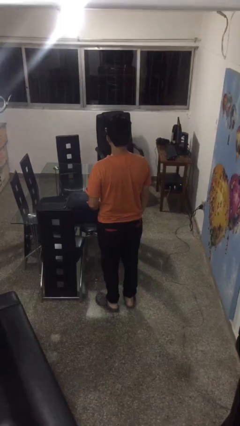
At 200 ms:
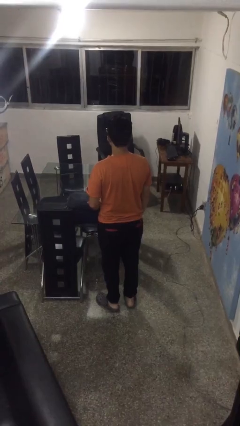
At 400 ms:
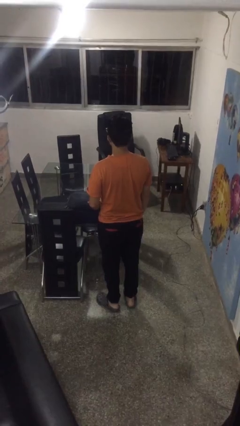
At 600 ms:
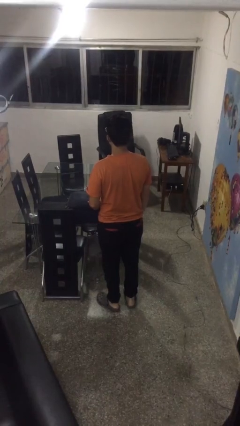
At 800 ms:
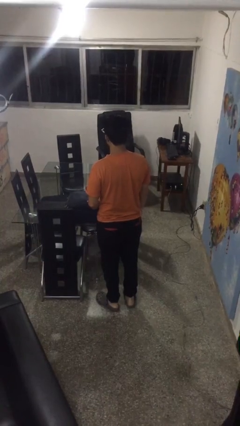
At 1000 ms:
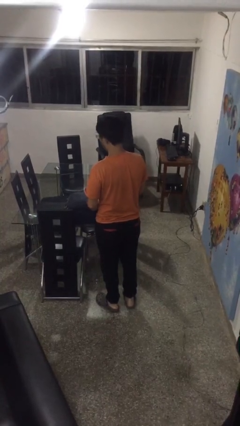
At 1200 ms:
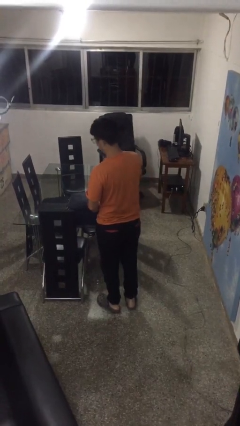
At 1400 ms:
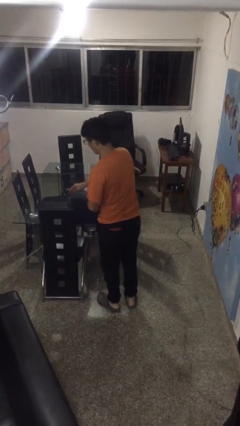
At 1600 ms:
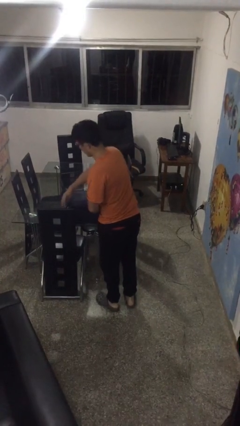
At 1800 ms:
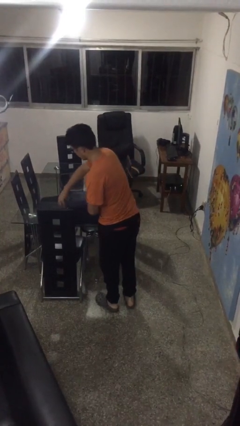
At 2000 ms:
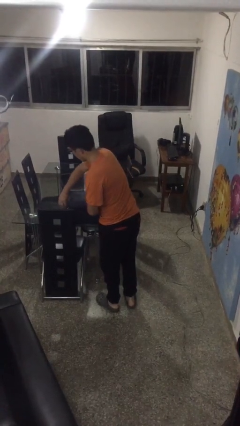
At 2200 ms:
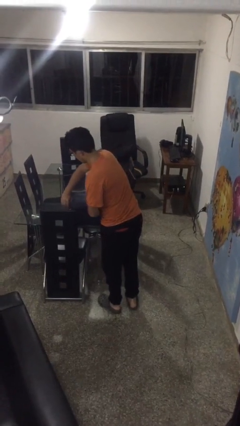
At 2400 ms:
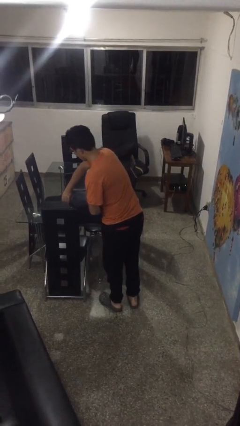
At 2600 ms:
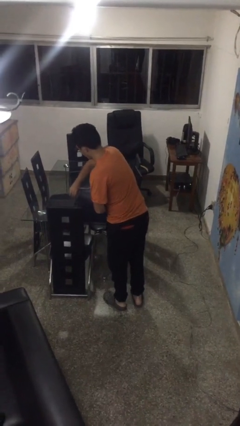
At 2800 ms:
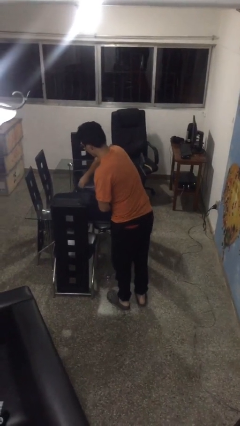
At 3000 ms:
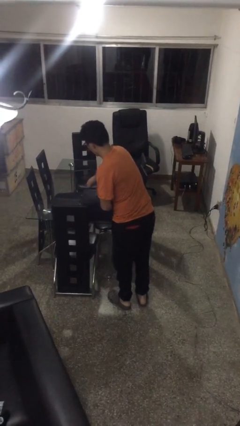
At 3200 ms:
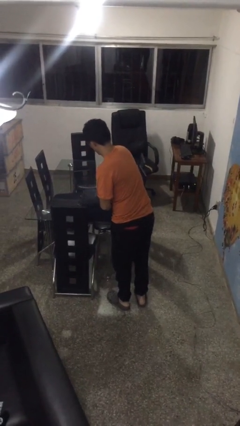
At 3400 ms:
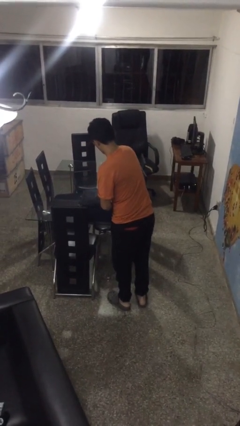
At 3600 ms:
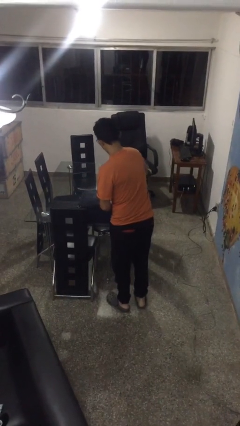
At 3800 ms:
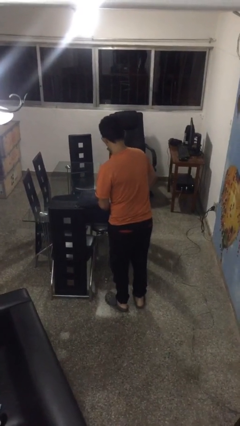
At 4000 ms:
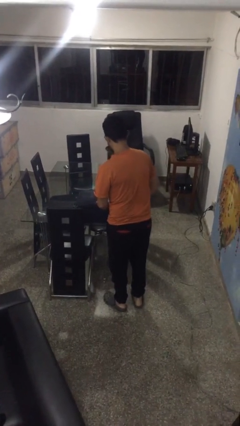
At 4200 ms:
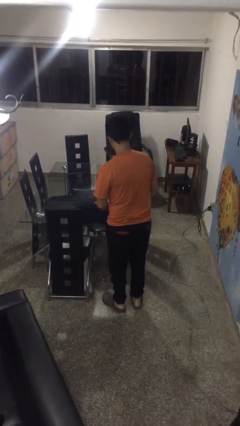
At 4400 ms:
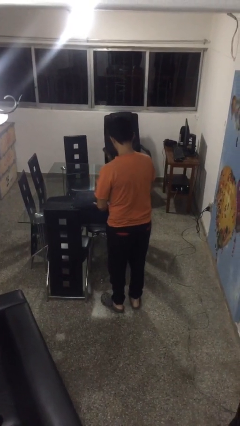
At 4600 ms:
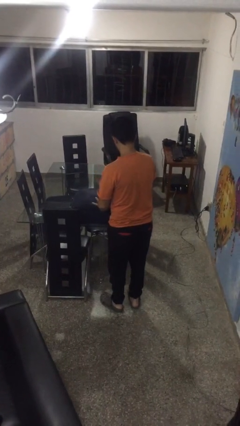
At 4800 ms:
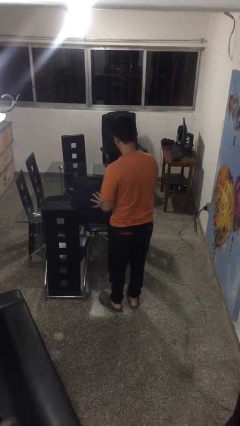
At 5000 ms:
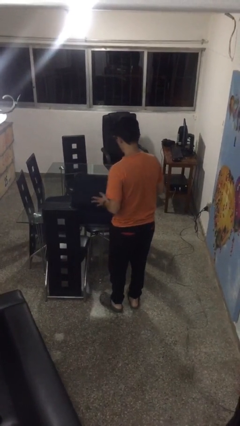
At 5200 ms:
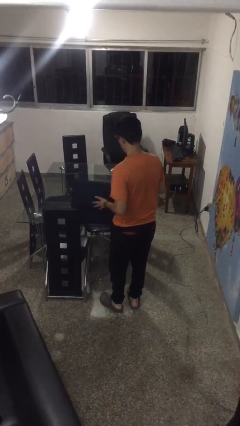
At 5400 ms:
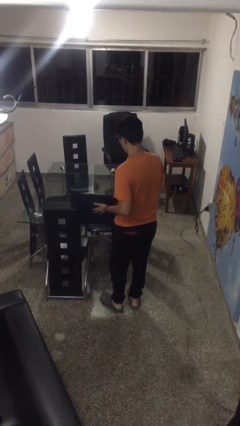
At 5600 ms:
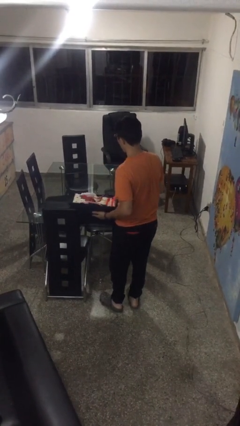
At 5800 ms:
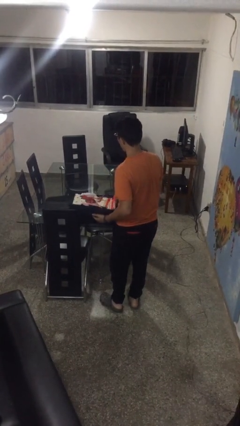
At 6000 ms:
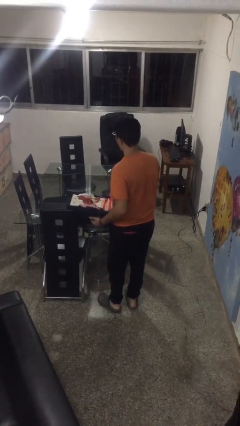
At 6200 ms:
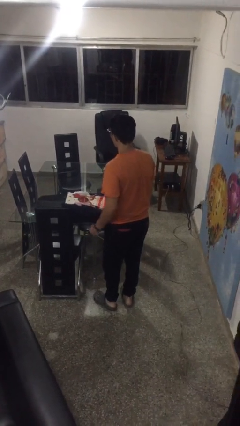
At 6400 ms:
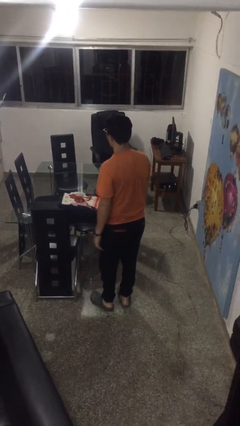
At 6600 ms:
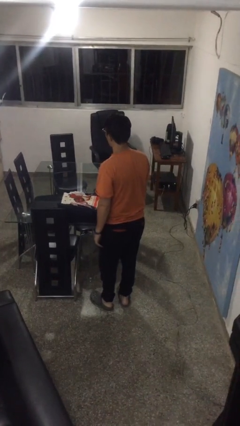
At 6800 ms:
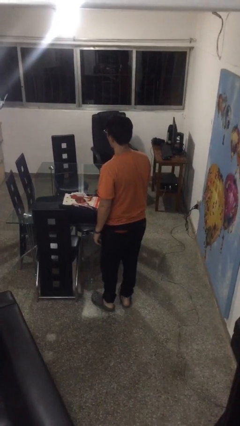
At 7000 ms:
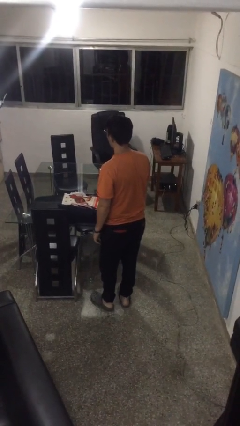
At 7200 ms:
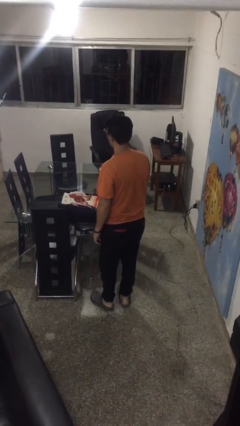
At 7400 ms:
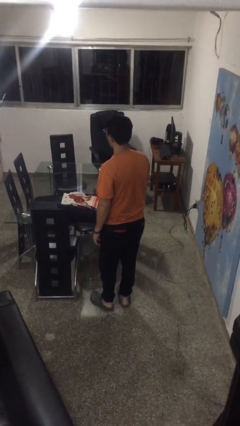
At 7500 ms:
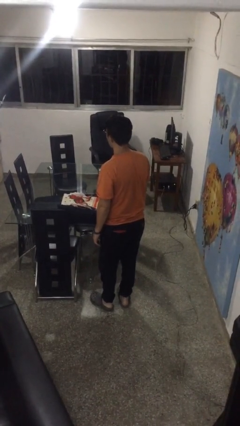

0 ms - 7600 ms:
person opens suitcase

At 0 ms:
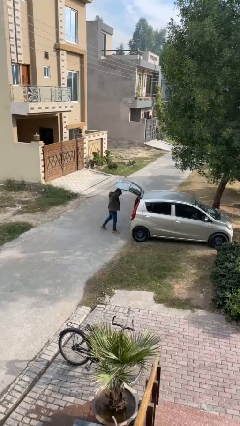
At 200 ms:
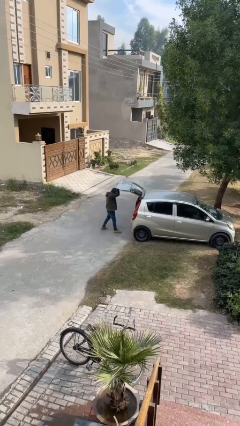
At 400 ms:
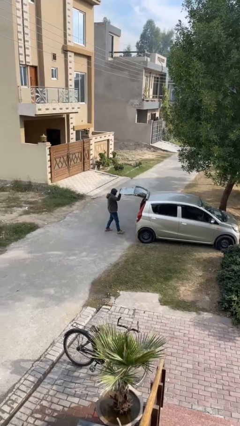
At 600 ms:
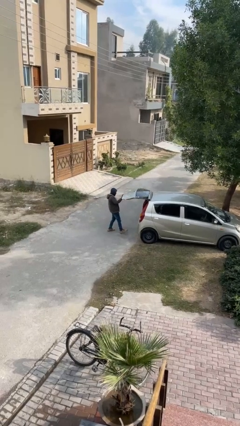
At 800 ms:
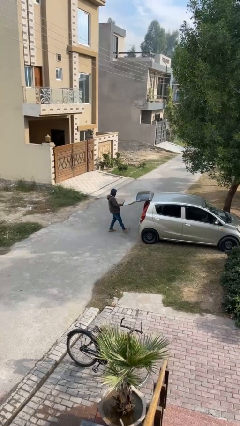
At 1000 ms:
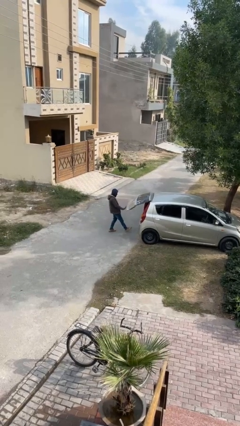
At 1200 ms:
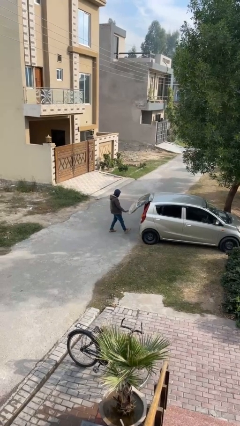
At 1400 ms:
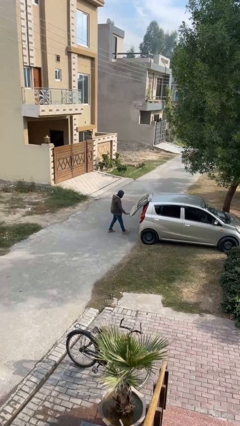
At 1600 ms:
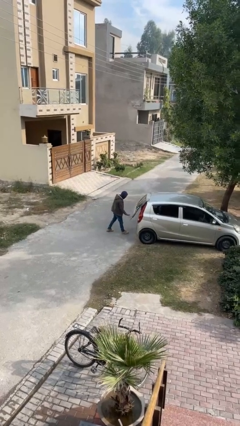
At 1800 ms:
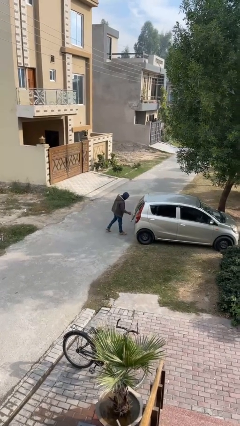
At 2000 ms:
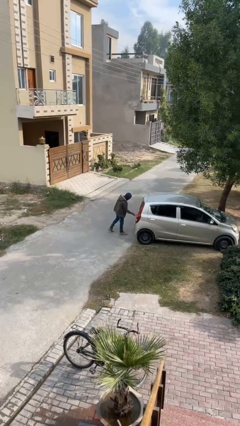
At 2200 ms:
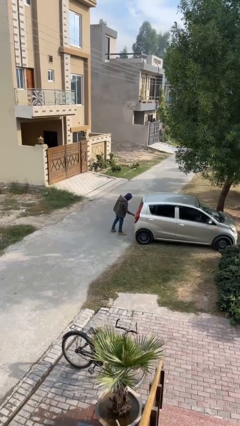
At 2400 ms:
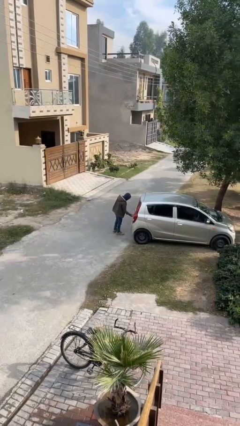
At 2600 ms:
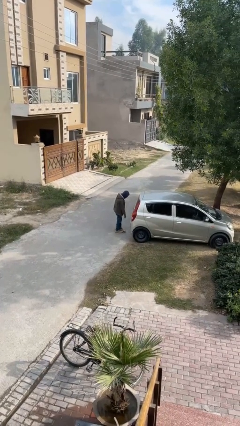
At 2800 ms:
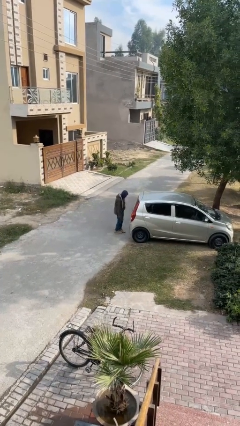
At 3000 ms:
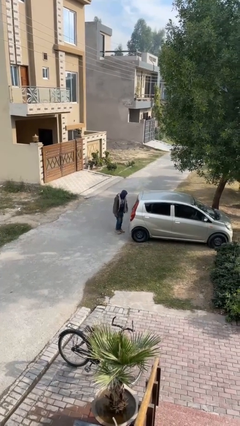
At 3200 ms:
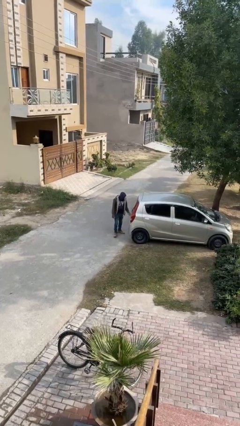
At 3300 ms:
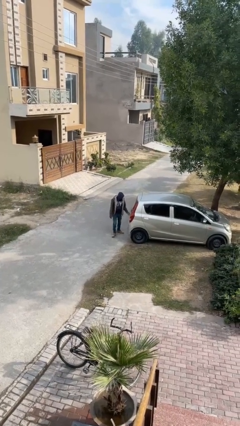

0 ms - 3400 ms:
person closes car trunk

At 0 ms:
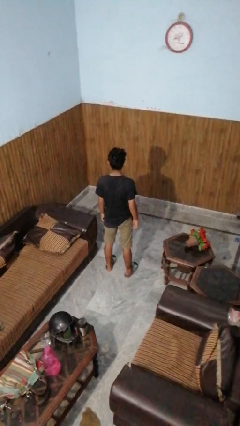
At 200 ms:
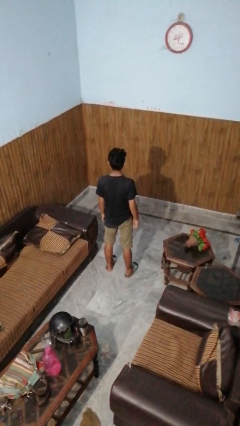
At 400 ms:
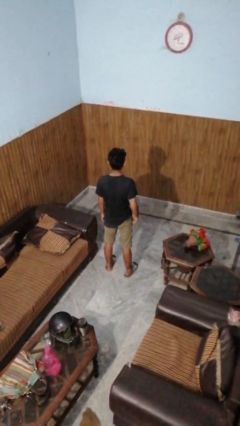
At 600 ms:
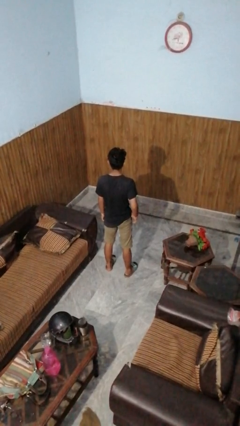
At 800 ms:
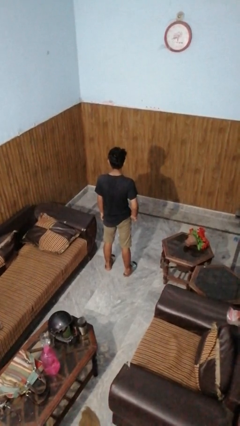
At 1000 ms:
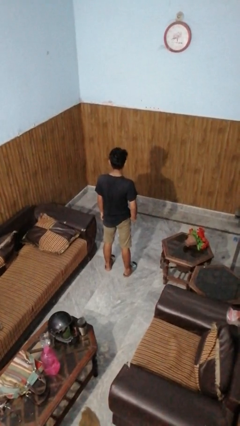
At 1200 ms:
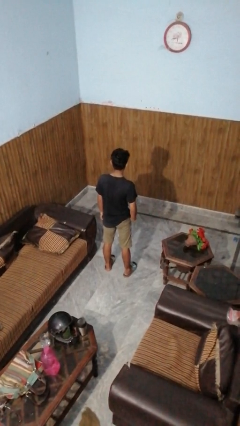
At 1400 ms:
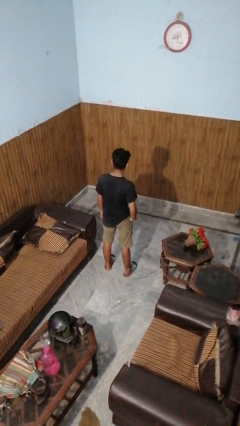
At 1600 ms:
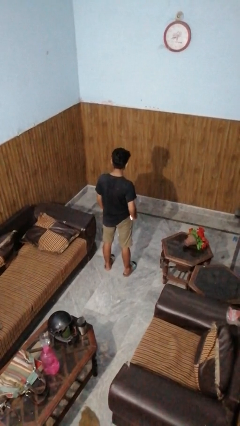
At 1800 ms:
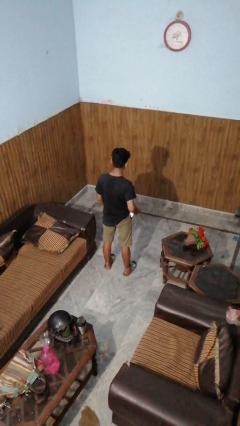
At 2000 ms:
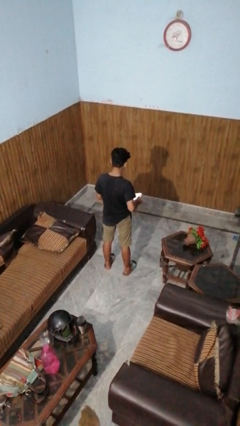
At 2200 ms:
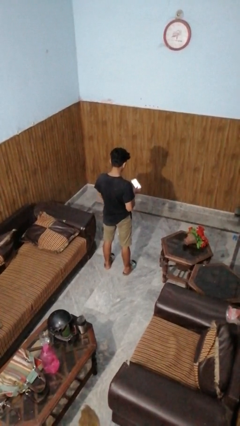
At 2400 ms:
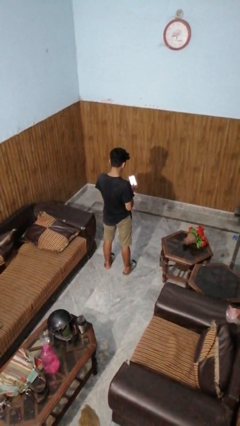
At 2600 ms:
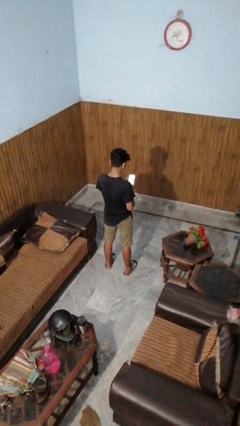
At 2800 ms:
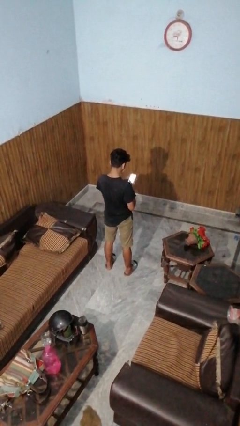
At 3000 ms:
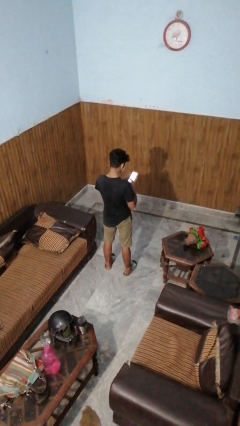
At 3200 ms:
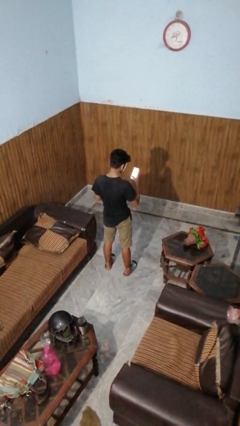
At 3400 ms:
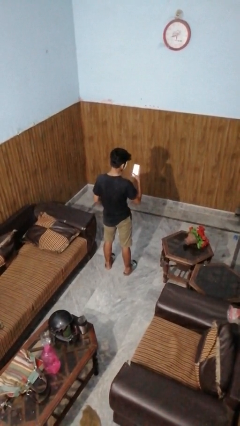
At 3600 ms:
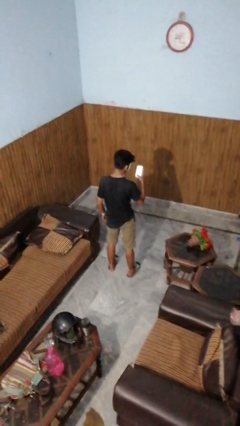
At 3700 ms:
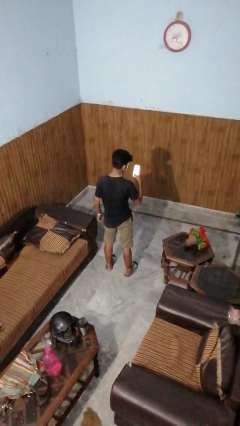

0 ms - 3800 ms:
person takes phone from pocket

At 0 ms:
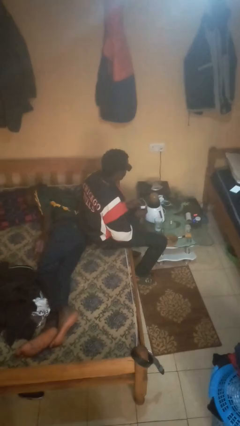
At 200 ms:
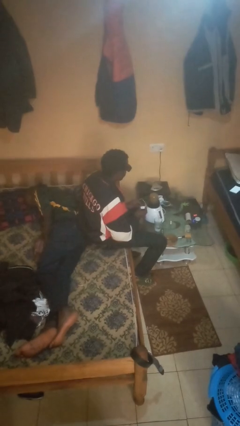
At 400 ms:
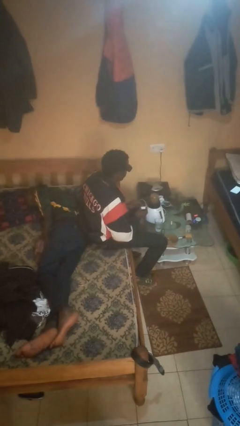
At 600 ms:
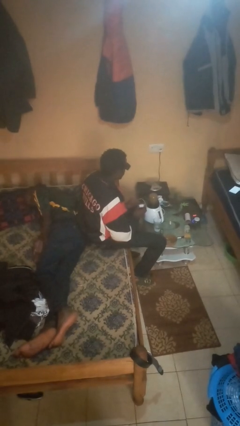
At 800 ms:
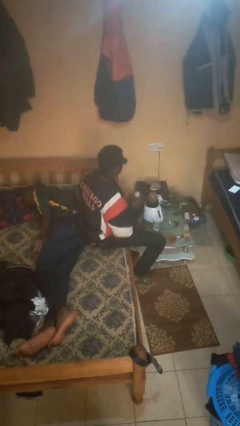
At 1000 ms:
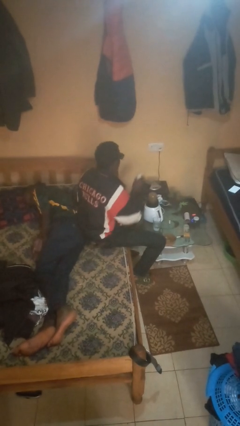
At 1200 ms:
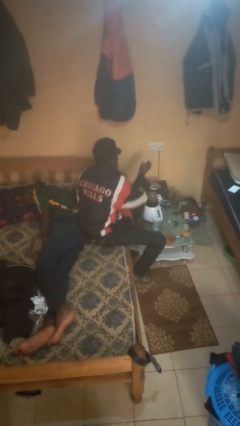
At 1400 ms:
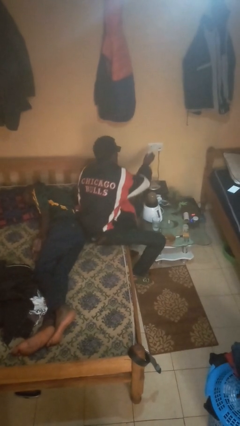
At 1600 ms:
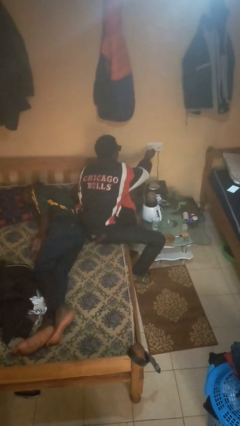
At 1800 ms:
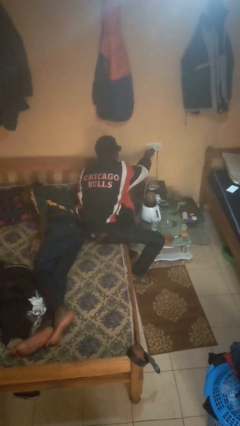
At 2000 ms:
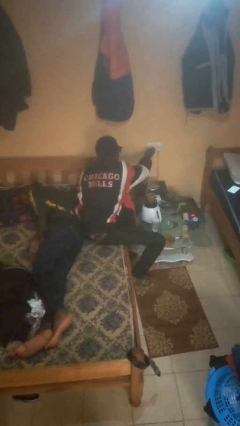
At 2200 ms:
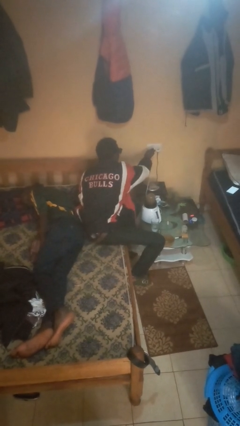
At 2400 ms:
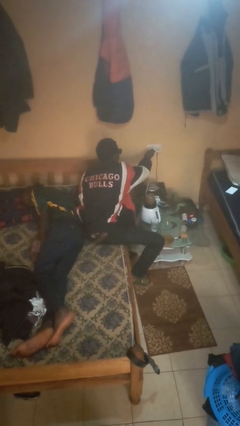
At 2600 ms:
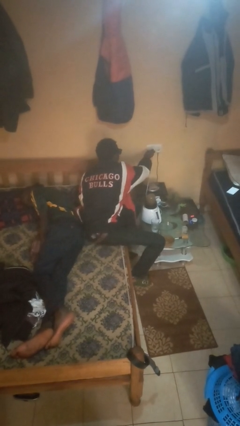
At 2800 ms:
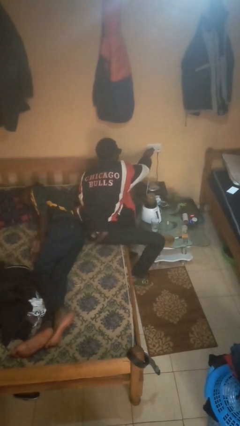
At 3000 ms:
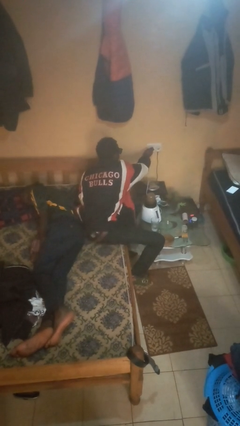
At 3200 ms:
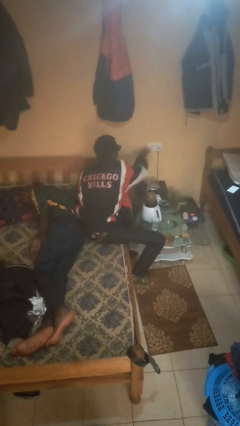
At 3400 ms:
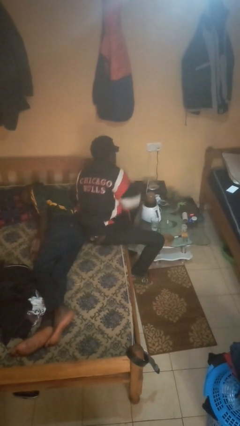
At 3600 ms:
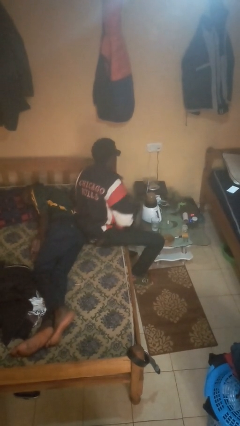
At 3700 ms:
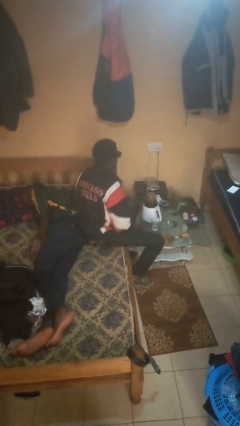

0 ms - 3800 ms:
person plugs into electrical socket
